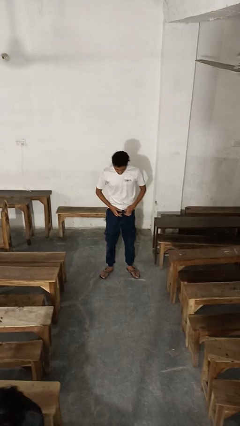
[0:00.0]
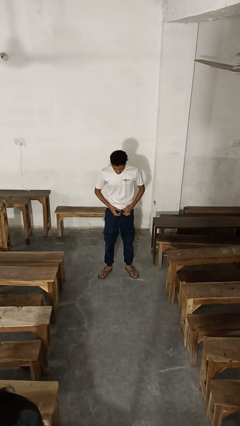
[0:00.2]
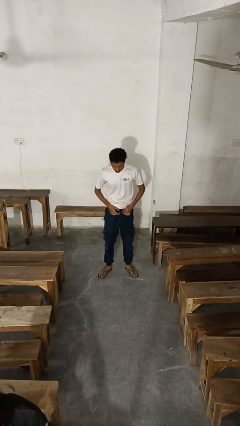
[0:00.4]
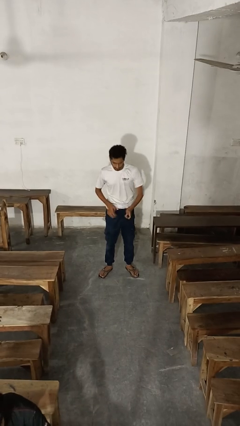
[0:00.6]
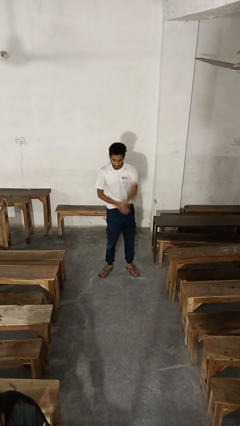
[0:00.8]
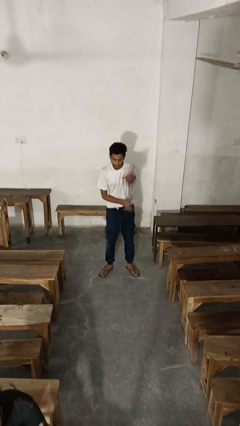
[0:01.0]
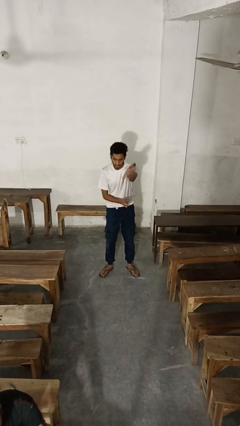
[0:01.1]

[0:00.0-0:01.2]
person takes off belt

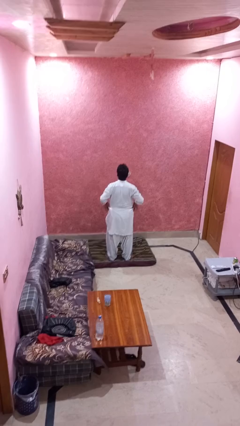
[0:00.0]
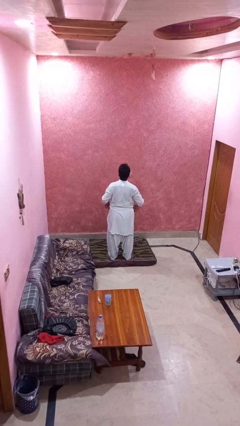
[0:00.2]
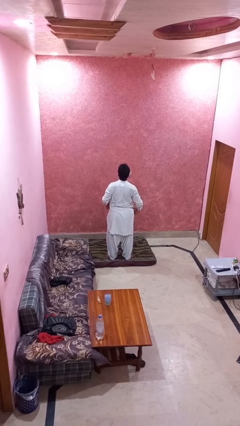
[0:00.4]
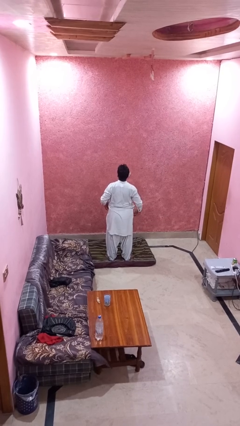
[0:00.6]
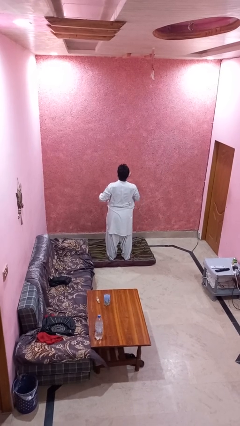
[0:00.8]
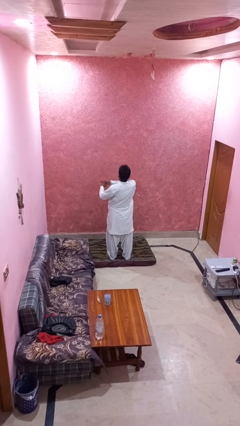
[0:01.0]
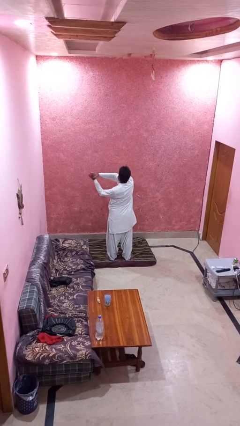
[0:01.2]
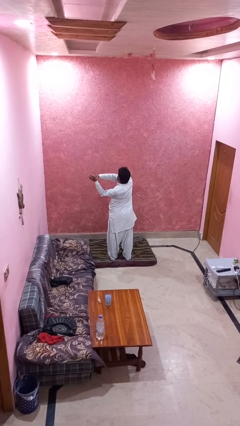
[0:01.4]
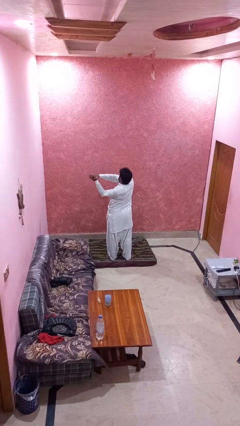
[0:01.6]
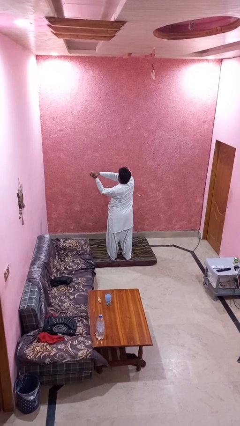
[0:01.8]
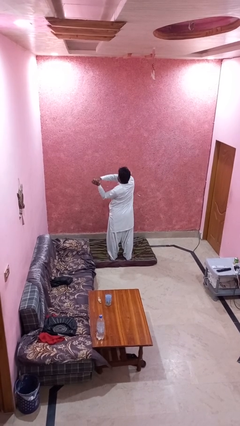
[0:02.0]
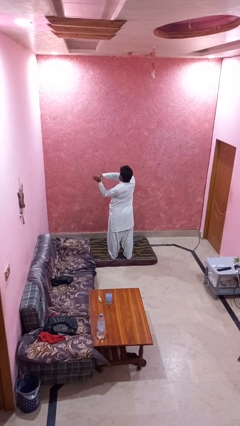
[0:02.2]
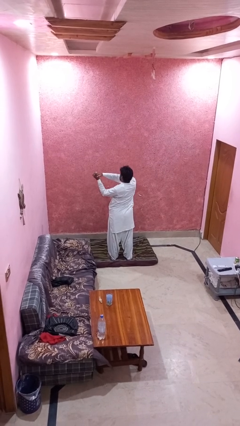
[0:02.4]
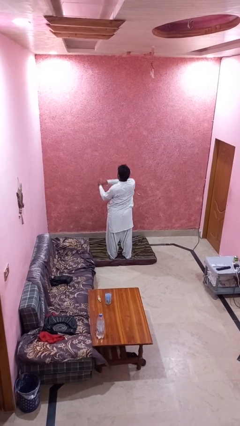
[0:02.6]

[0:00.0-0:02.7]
person stretches arms to side

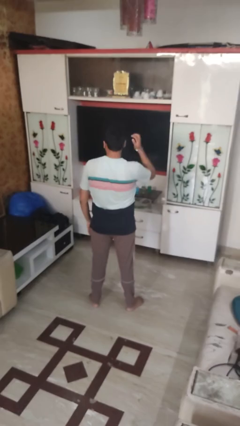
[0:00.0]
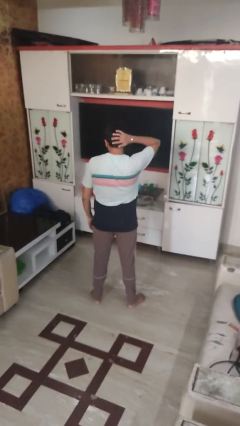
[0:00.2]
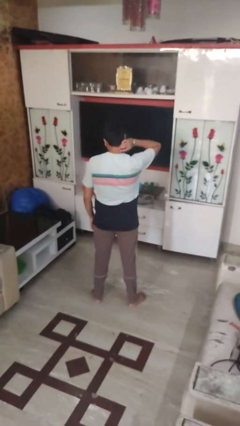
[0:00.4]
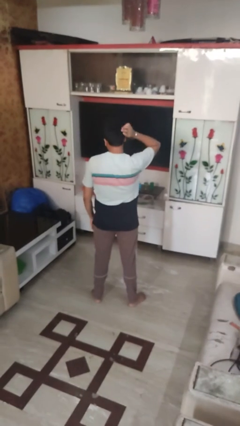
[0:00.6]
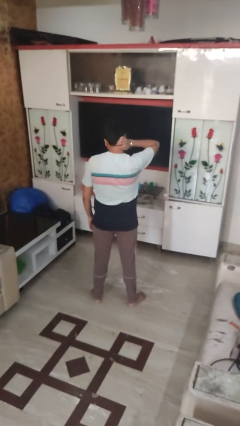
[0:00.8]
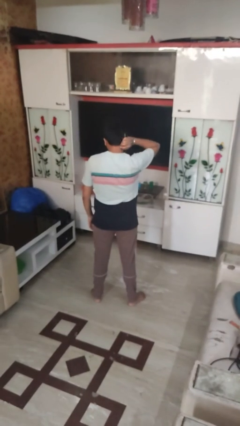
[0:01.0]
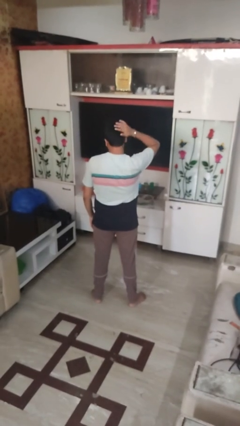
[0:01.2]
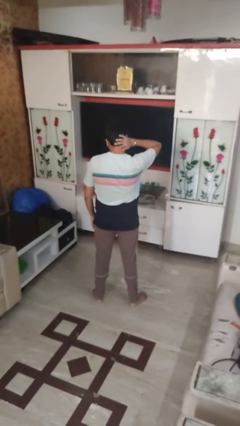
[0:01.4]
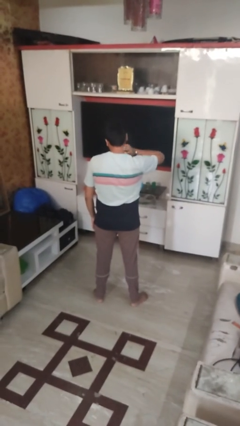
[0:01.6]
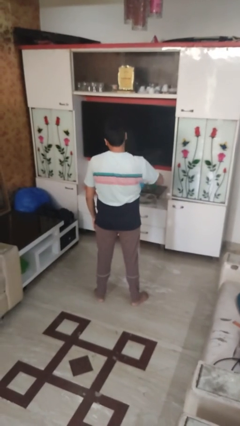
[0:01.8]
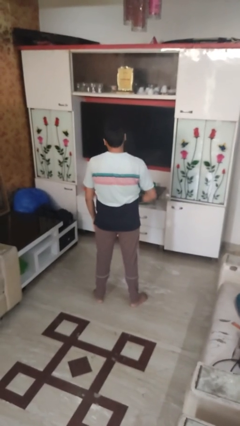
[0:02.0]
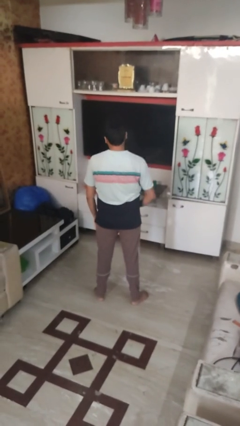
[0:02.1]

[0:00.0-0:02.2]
person strokes hair

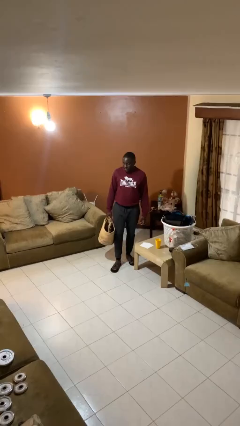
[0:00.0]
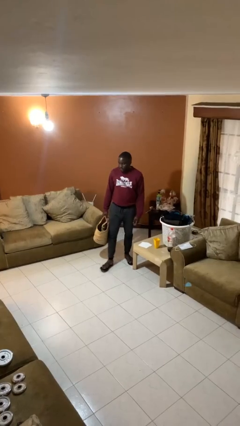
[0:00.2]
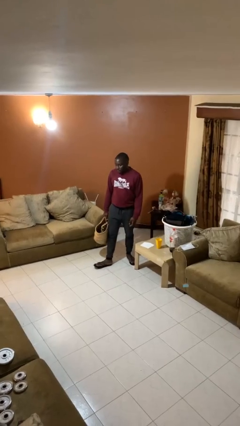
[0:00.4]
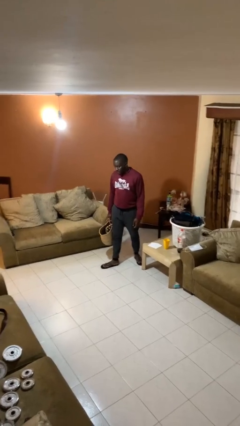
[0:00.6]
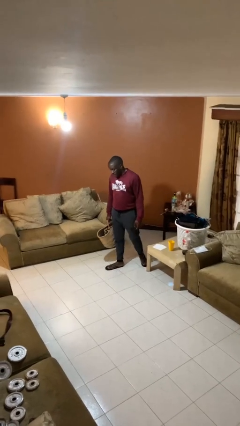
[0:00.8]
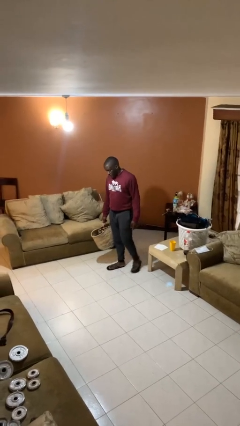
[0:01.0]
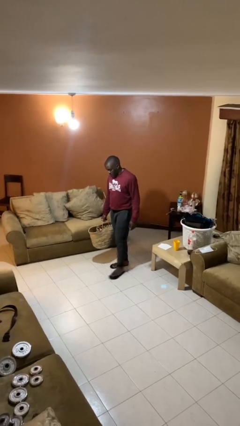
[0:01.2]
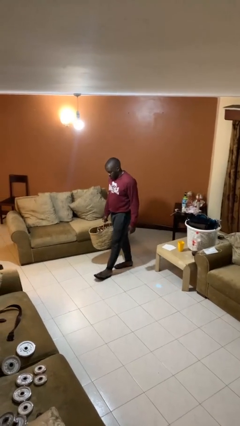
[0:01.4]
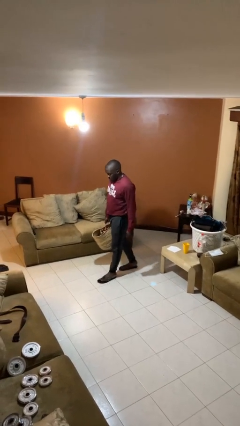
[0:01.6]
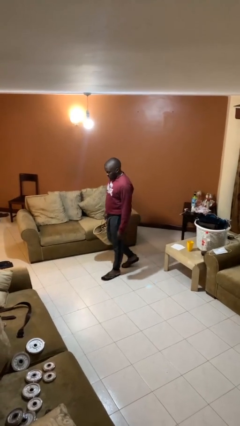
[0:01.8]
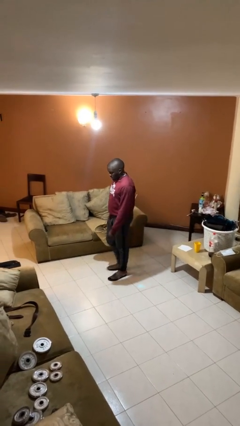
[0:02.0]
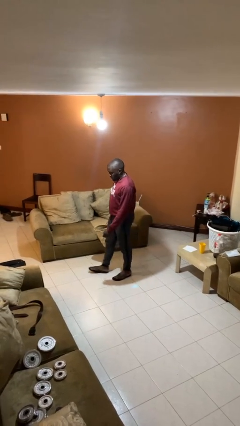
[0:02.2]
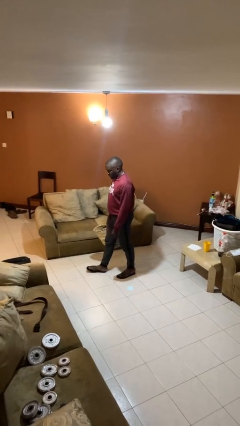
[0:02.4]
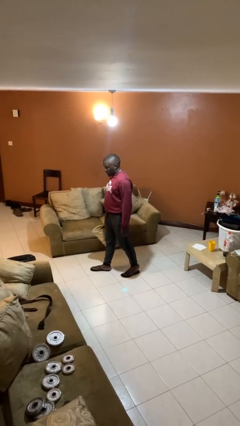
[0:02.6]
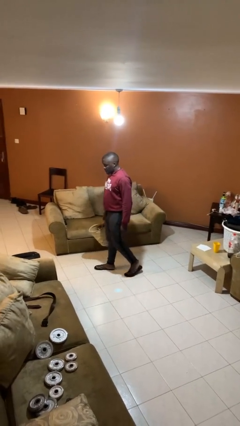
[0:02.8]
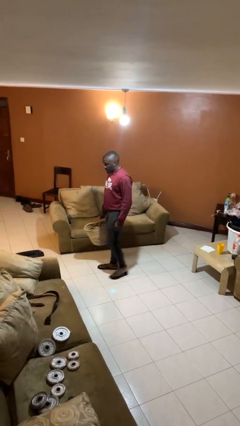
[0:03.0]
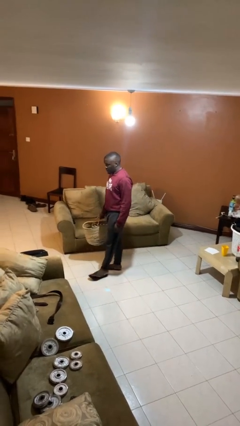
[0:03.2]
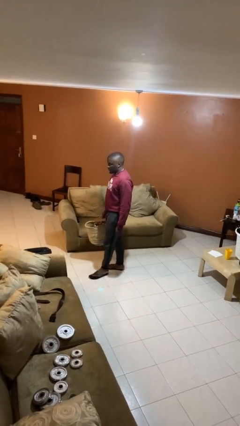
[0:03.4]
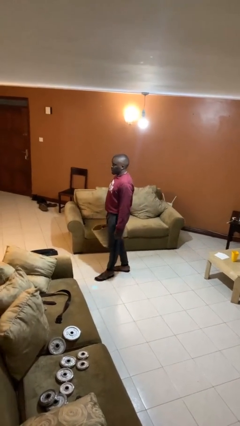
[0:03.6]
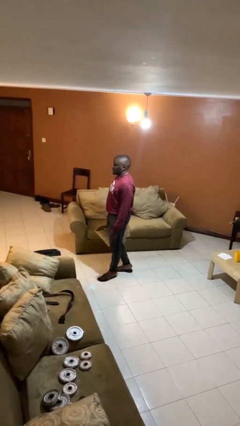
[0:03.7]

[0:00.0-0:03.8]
person carries groceries

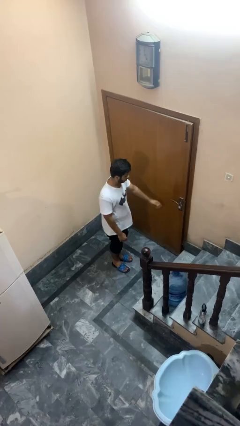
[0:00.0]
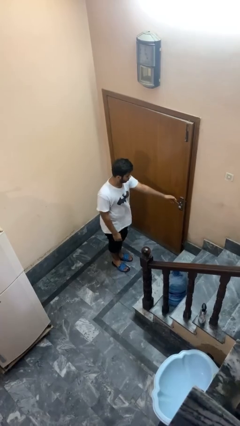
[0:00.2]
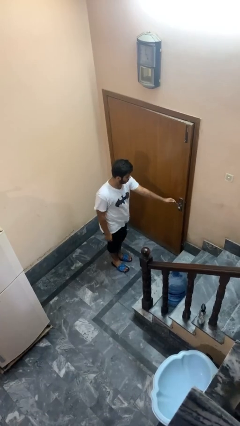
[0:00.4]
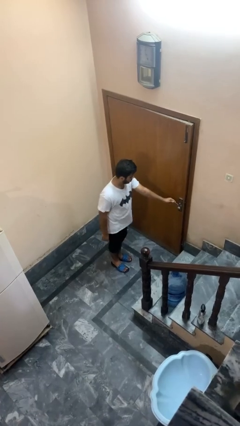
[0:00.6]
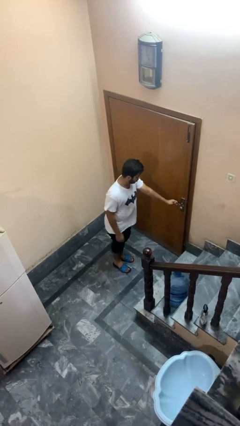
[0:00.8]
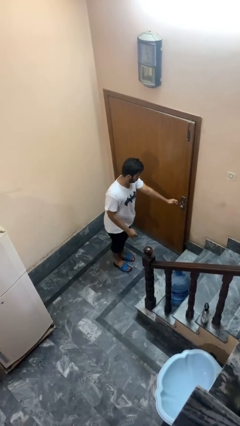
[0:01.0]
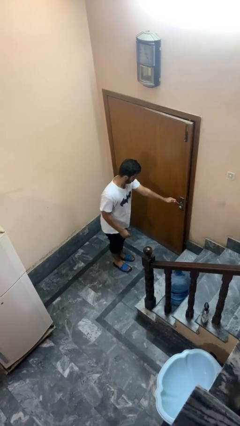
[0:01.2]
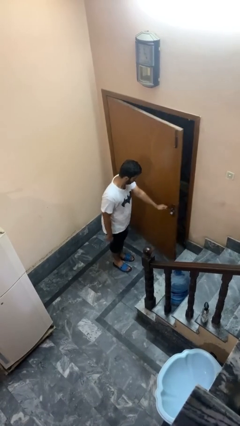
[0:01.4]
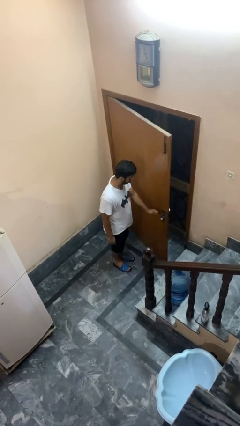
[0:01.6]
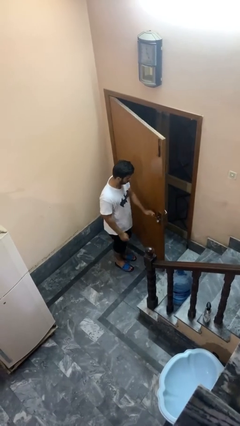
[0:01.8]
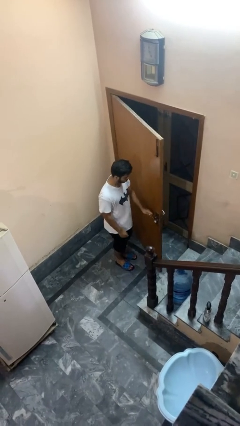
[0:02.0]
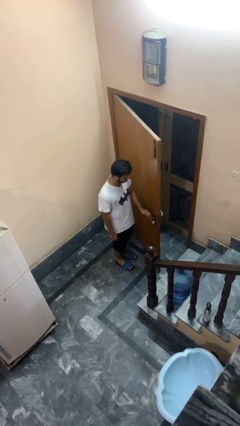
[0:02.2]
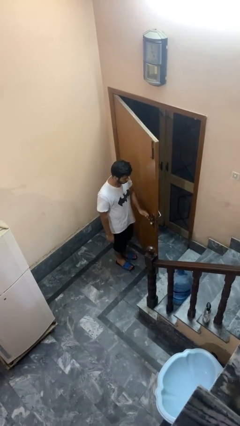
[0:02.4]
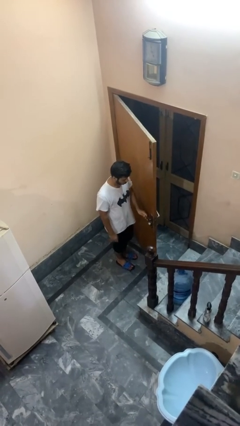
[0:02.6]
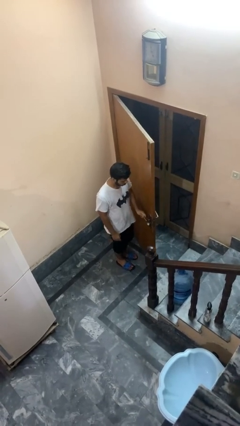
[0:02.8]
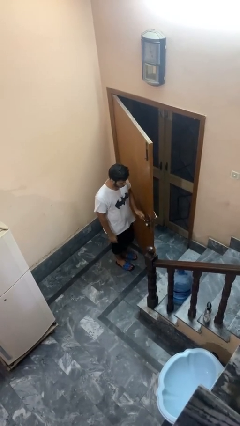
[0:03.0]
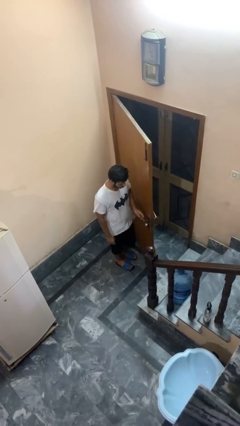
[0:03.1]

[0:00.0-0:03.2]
person opens facility door

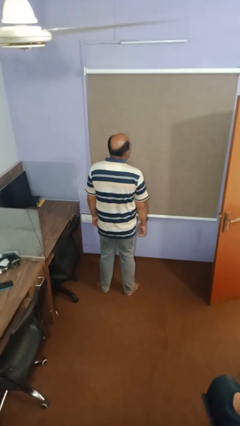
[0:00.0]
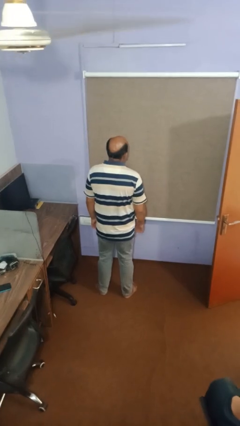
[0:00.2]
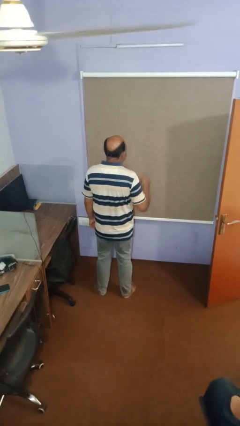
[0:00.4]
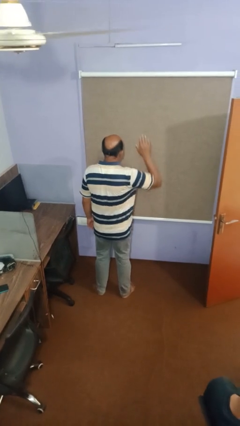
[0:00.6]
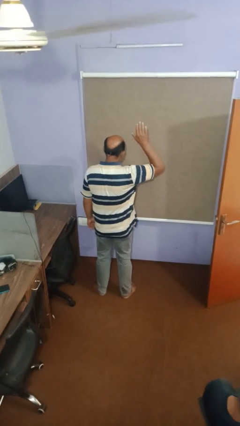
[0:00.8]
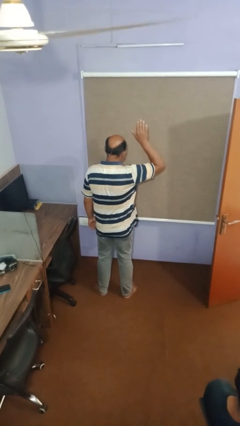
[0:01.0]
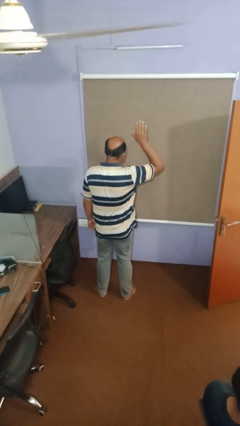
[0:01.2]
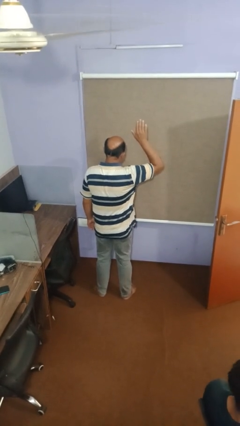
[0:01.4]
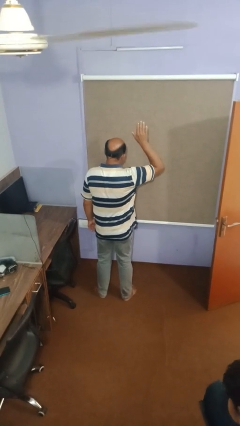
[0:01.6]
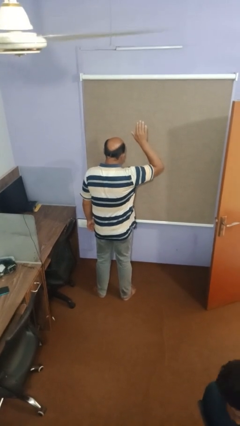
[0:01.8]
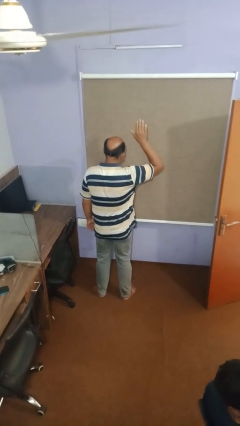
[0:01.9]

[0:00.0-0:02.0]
person gestures raise hand

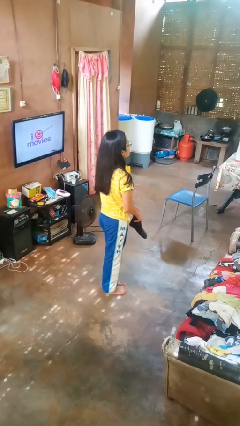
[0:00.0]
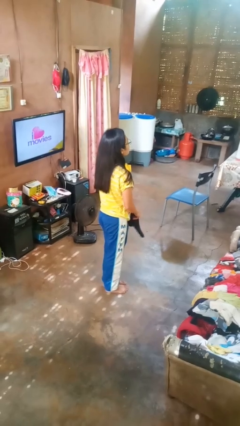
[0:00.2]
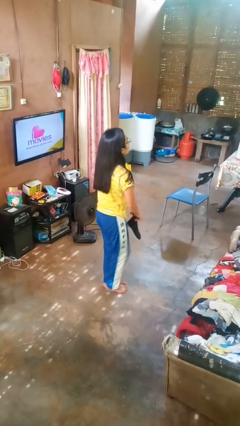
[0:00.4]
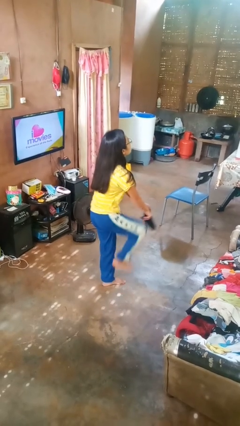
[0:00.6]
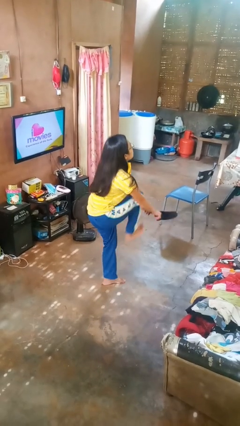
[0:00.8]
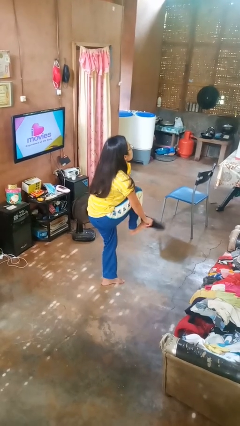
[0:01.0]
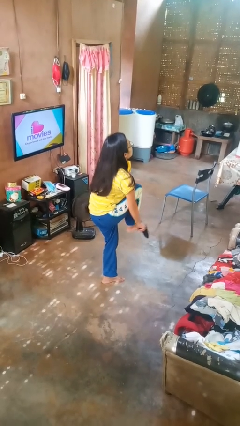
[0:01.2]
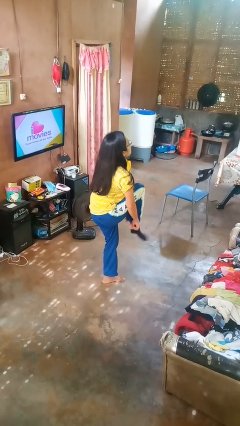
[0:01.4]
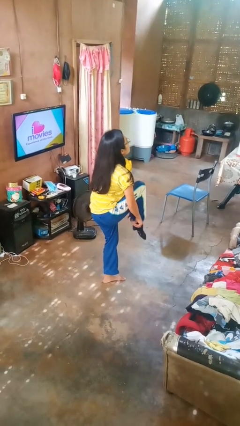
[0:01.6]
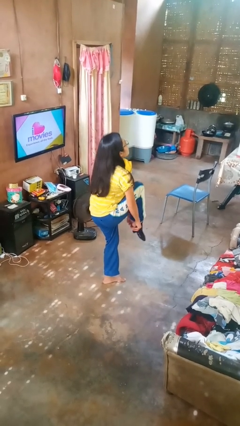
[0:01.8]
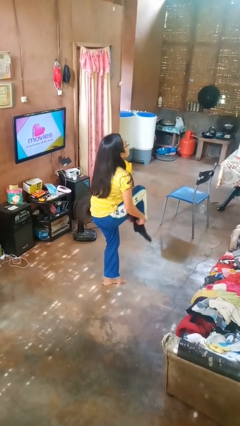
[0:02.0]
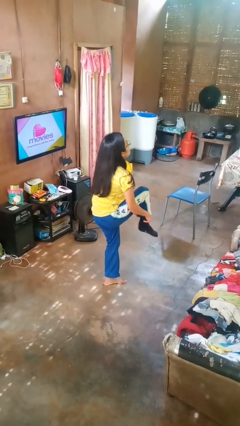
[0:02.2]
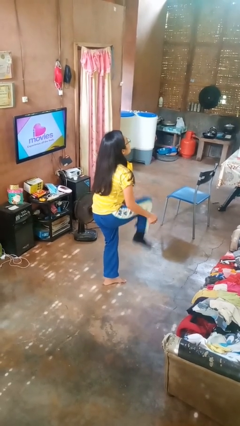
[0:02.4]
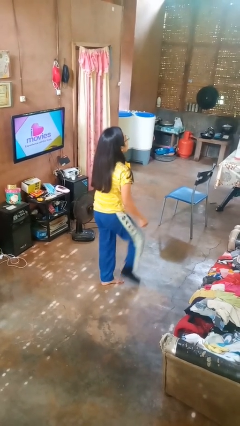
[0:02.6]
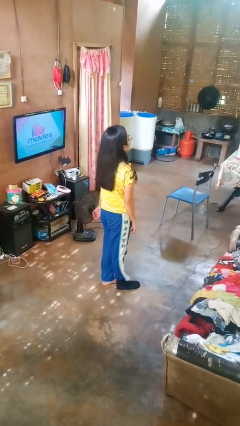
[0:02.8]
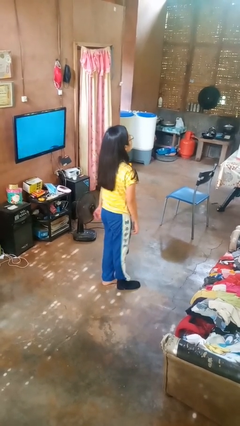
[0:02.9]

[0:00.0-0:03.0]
person puts on socks
